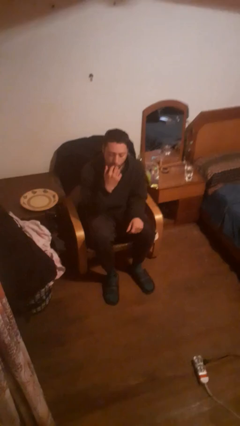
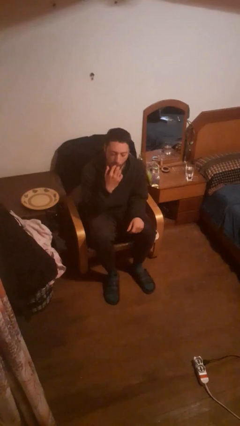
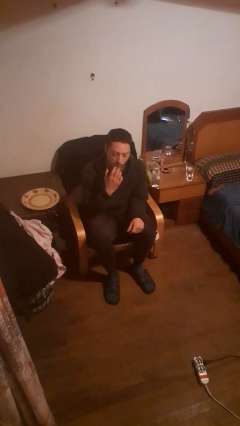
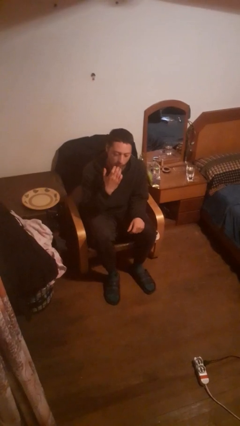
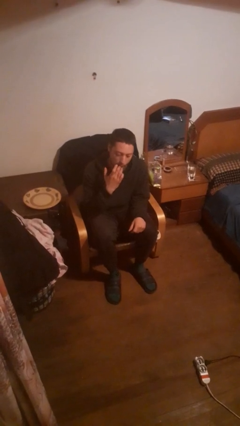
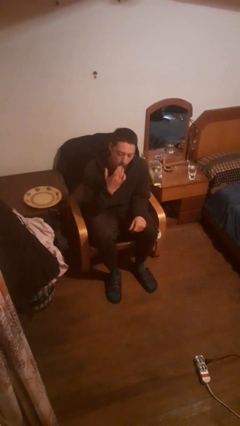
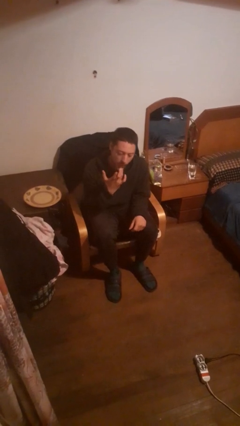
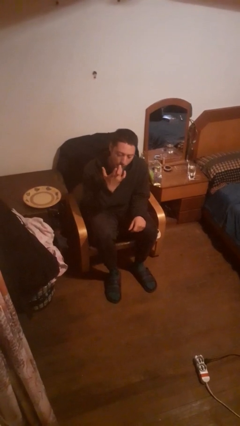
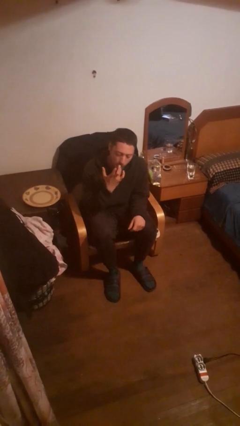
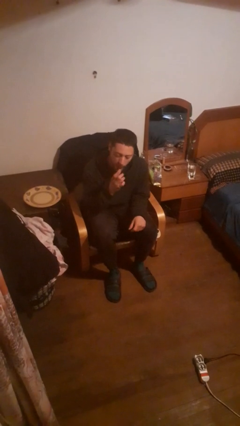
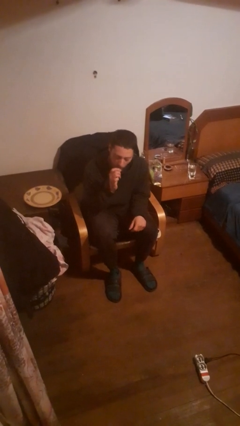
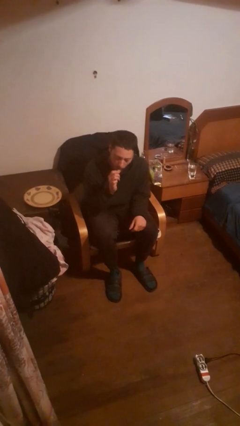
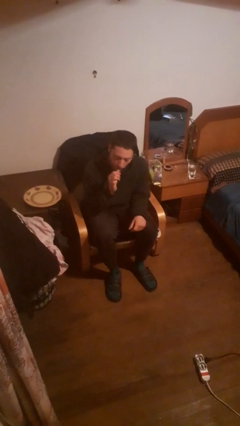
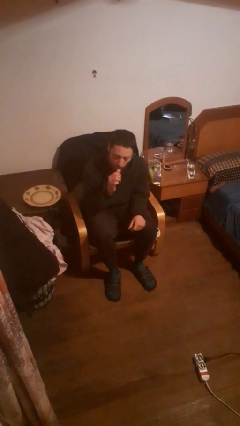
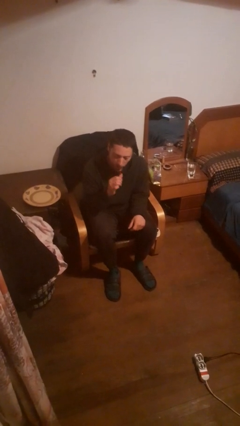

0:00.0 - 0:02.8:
person licks fingers

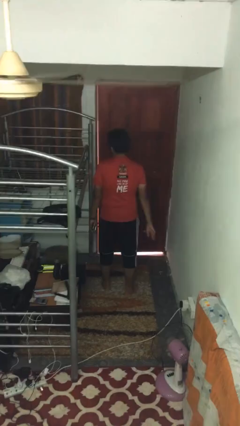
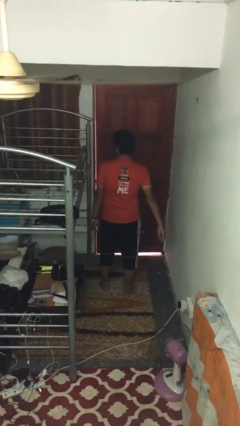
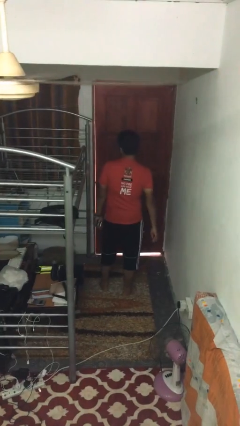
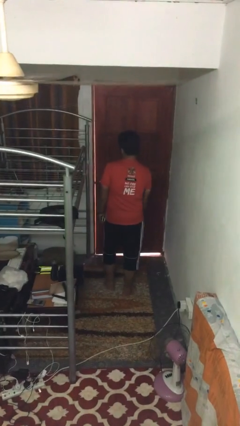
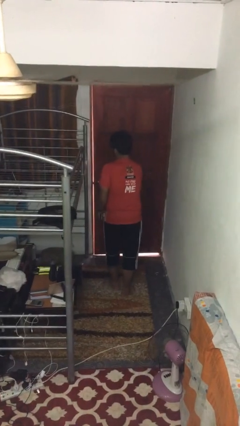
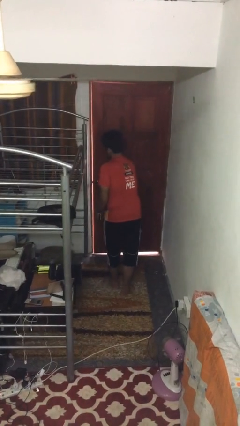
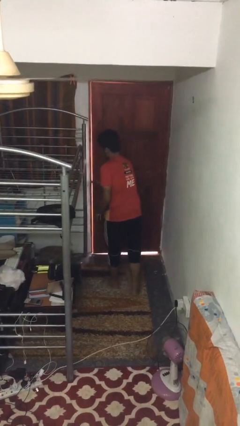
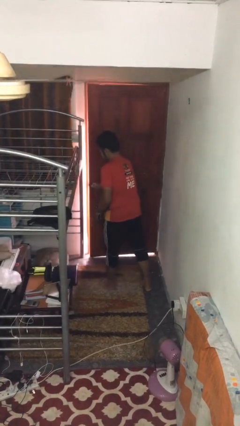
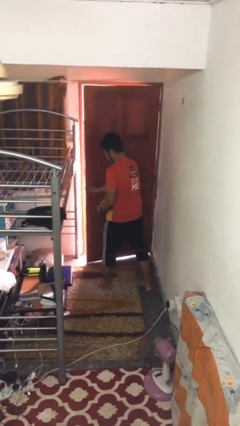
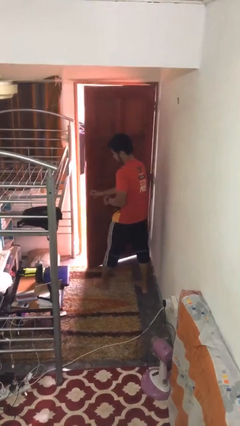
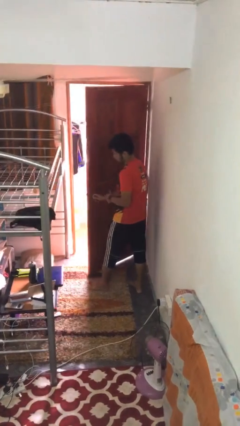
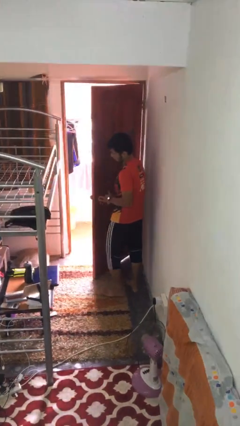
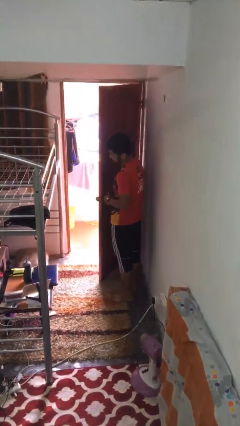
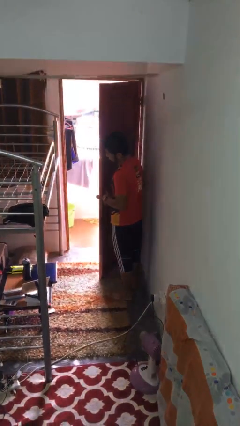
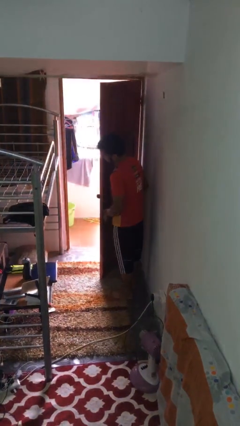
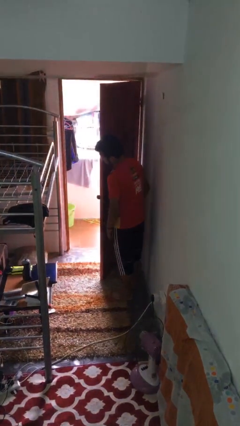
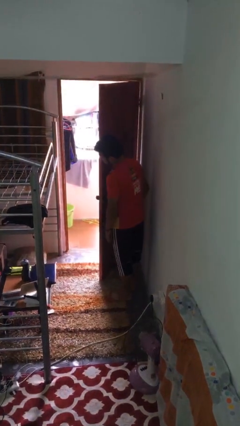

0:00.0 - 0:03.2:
person opens facility door

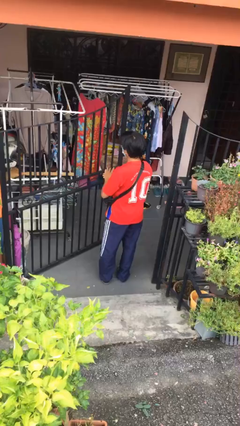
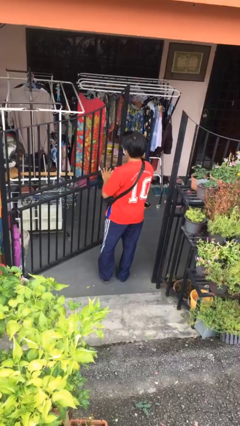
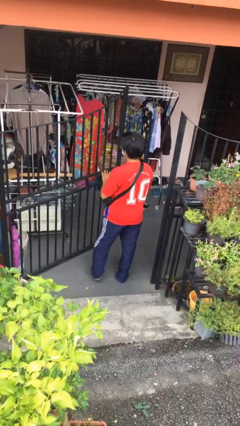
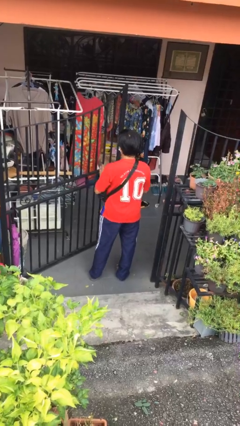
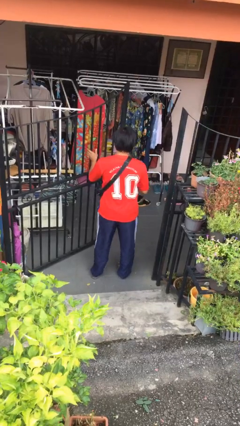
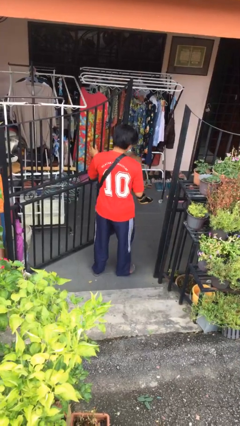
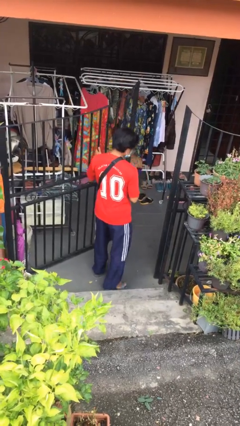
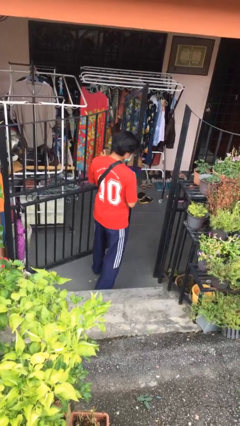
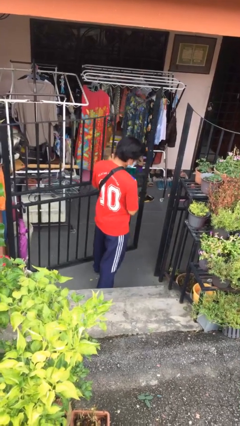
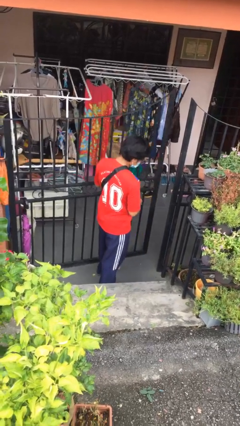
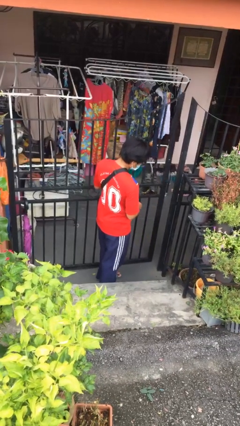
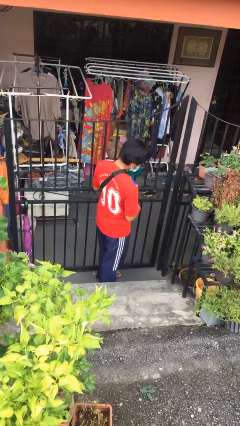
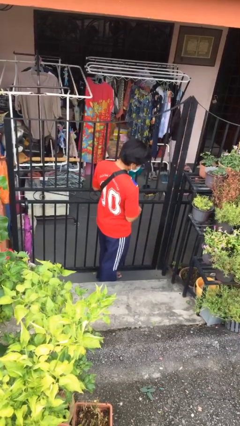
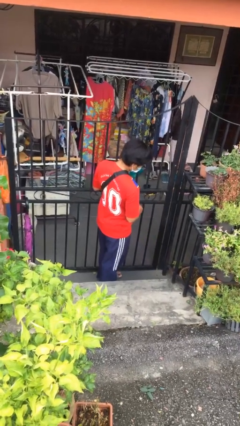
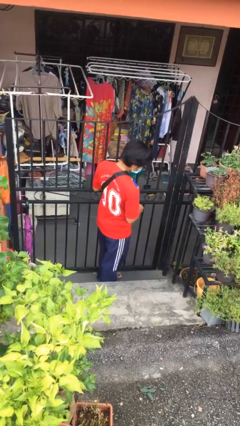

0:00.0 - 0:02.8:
person closes facility door

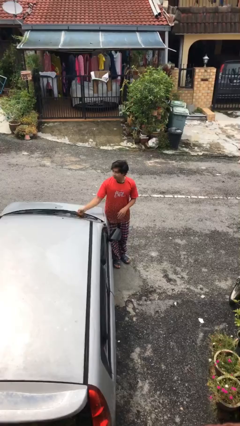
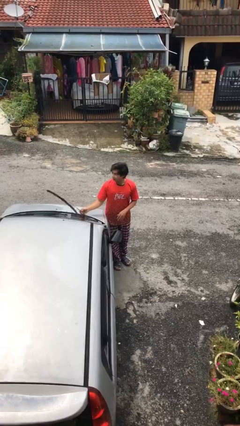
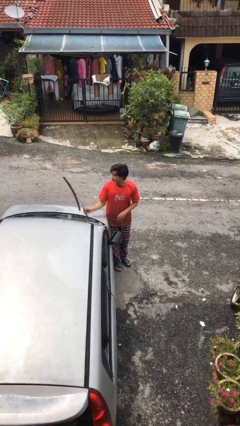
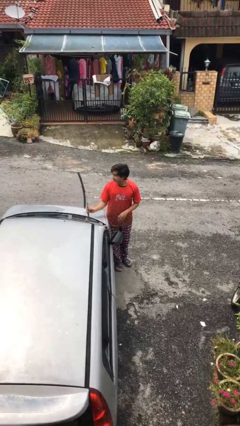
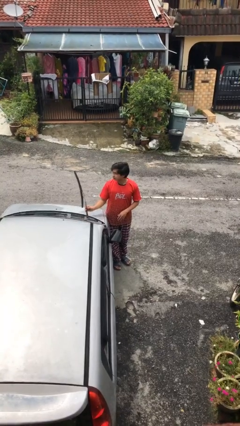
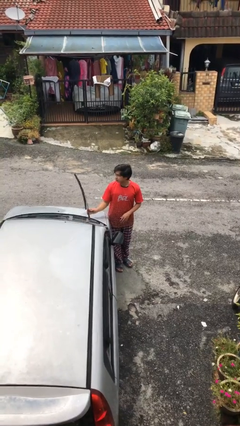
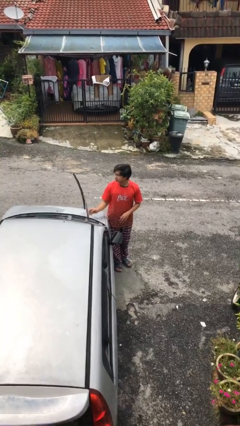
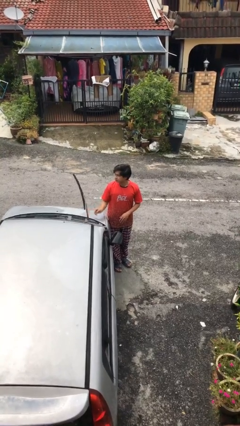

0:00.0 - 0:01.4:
person flips up car wipers

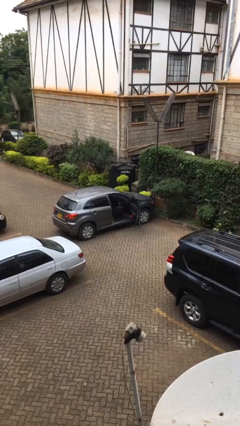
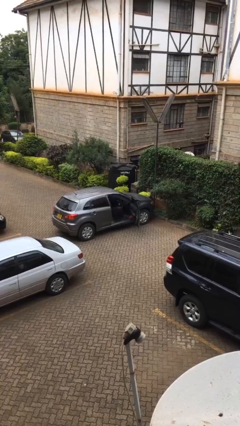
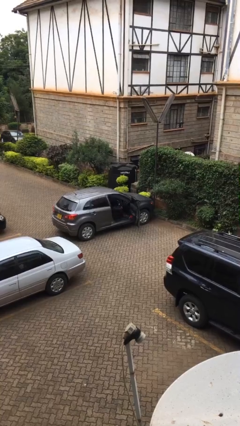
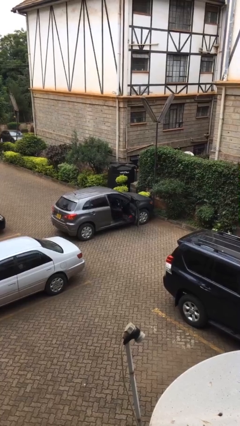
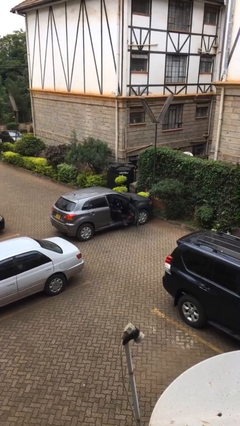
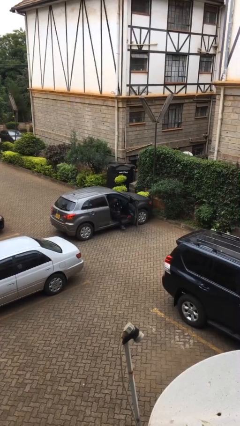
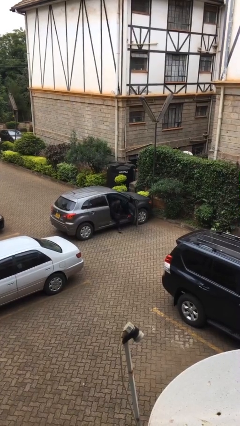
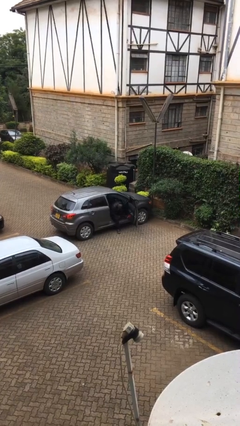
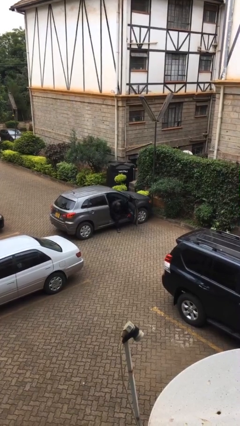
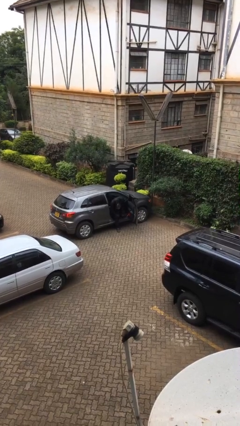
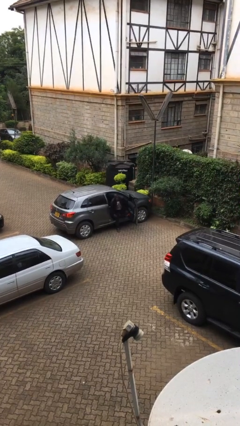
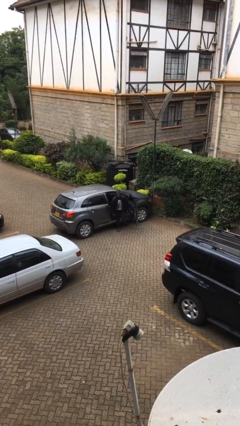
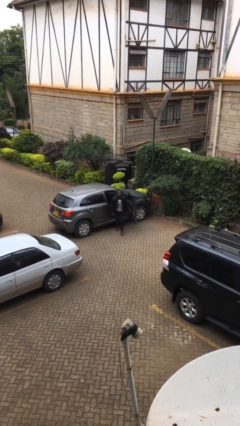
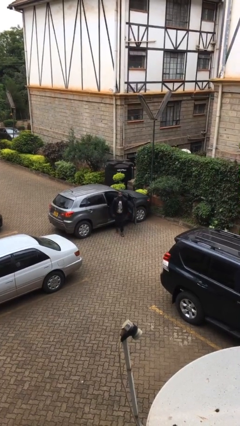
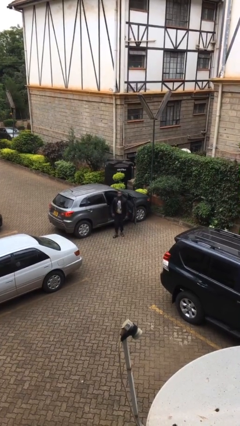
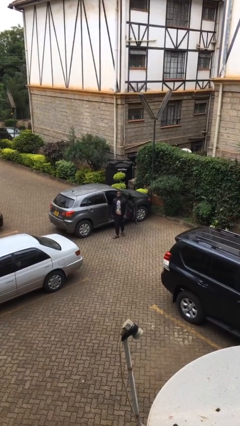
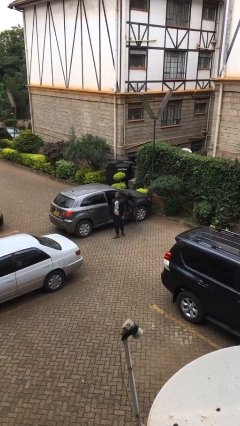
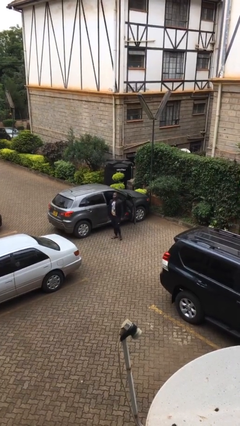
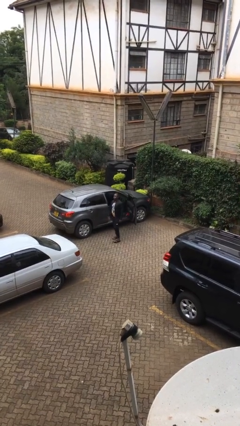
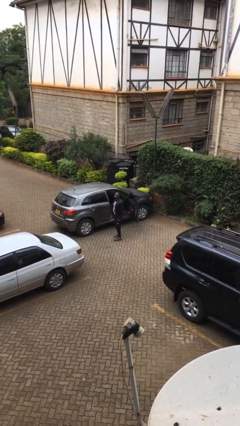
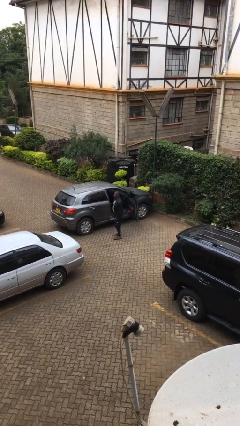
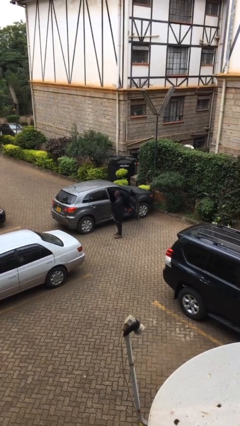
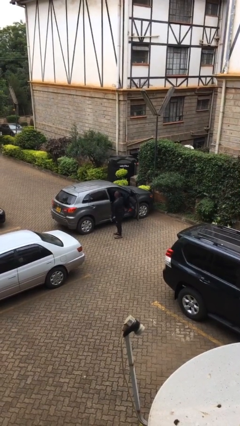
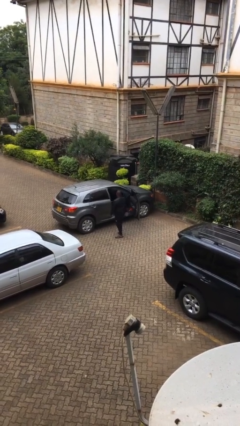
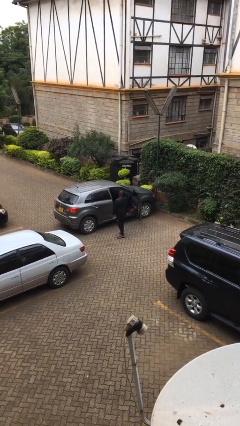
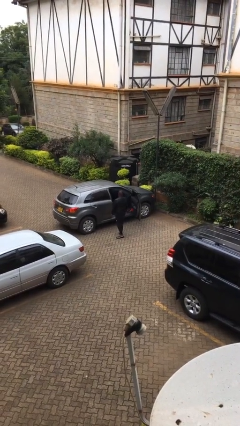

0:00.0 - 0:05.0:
person exits car

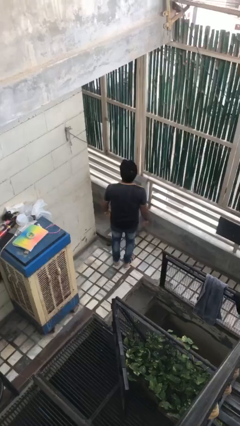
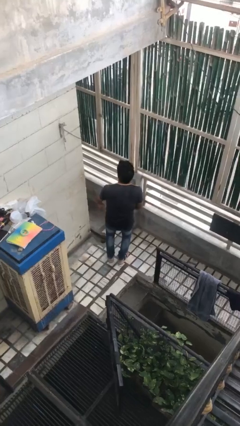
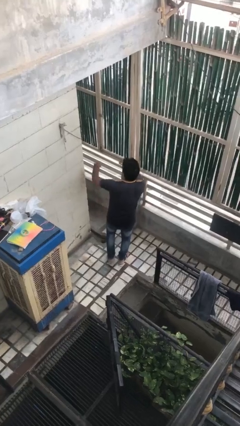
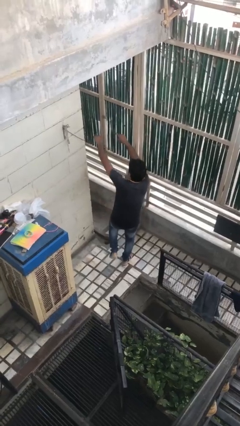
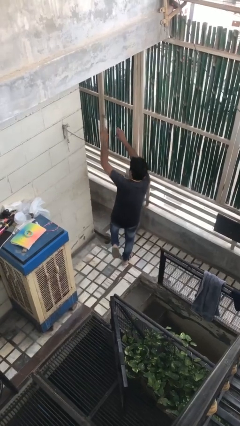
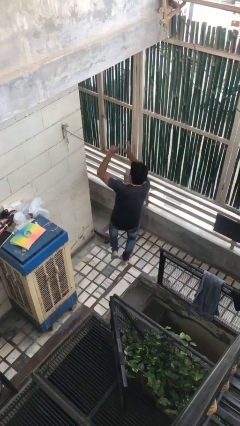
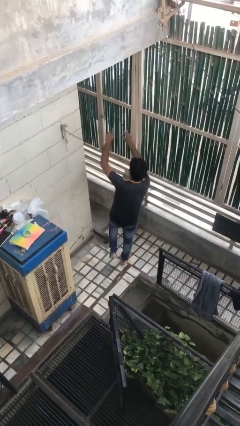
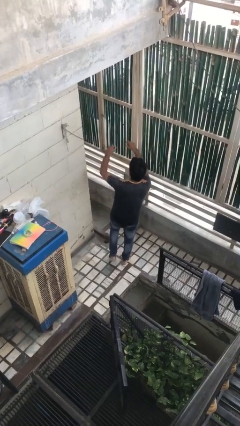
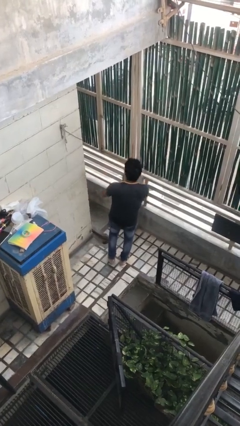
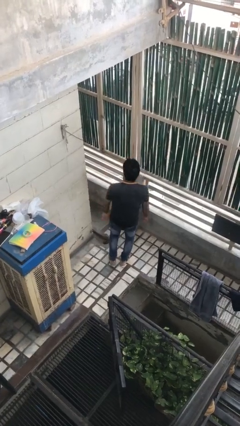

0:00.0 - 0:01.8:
person dances in place

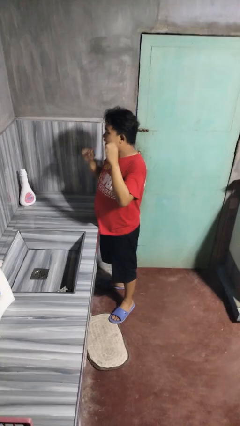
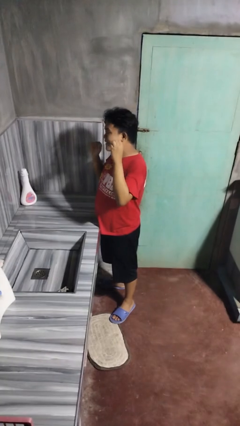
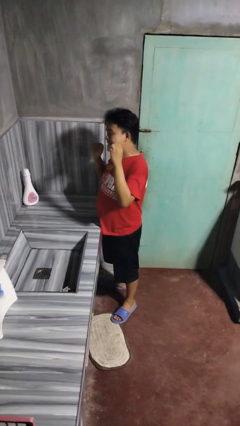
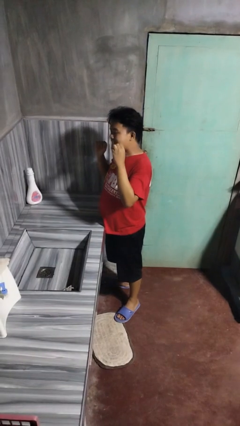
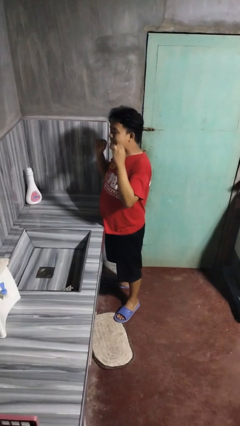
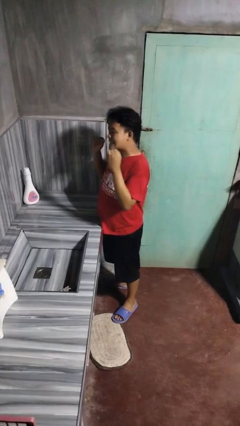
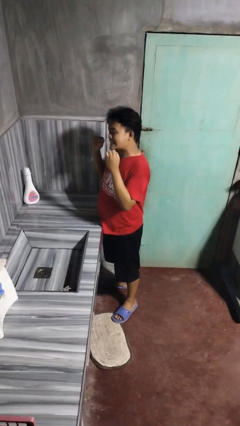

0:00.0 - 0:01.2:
person flosses
